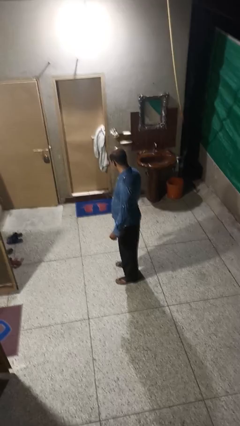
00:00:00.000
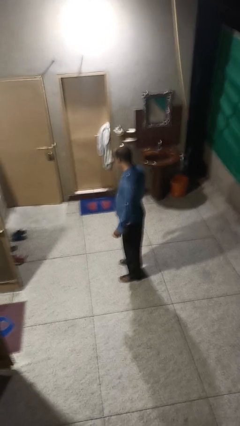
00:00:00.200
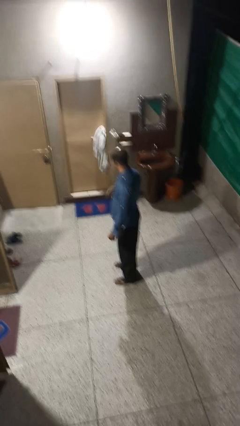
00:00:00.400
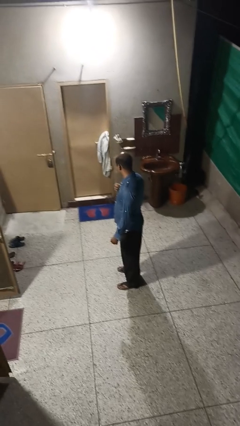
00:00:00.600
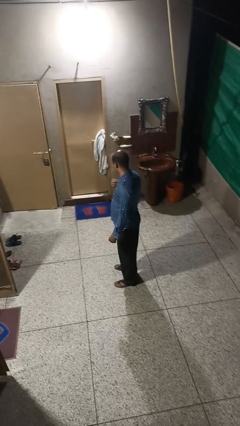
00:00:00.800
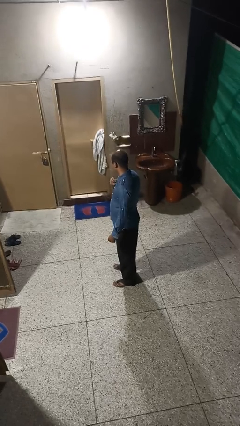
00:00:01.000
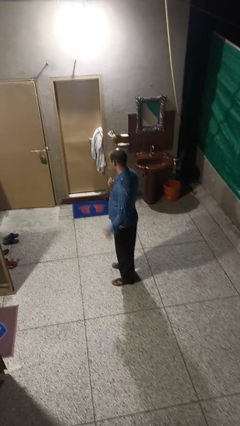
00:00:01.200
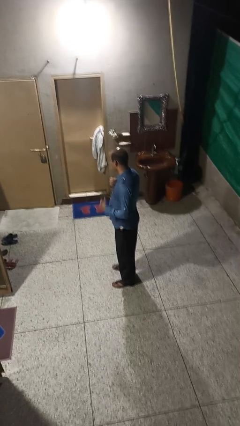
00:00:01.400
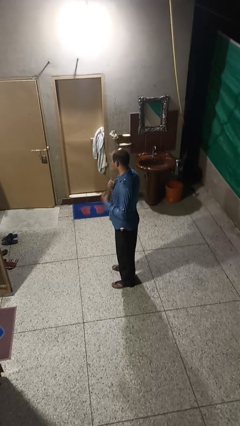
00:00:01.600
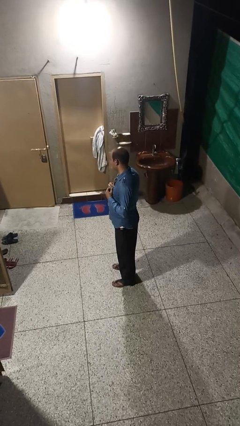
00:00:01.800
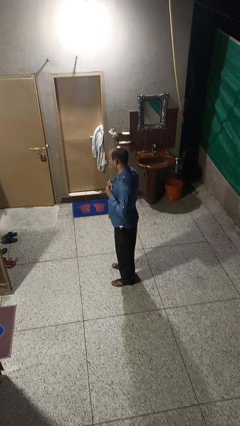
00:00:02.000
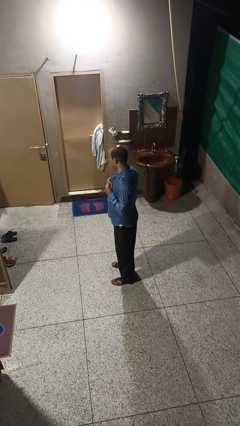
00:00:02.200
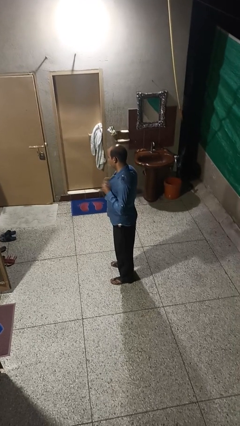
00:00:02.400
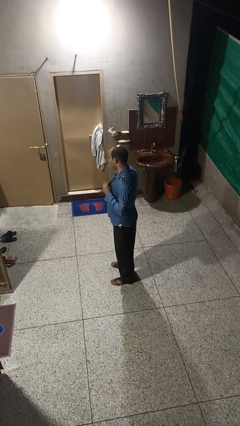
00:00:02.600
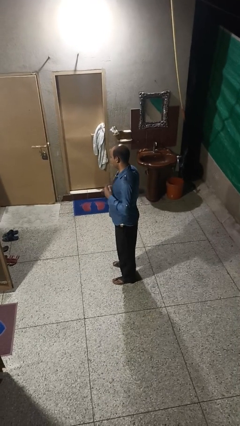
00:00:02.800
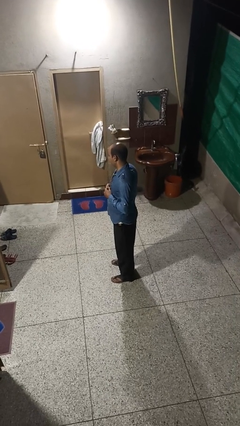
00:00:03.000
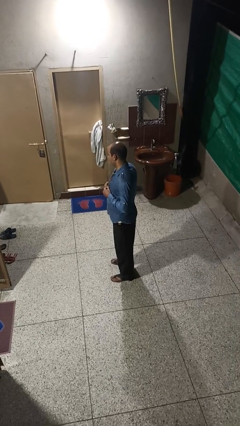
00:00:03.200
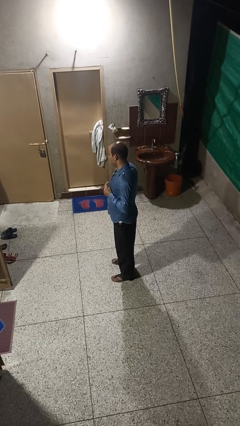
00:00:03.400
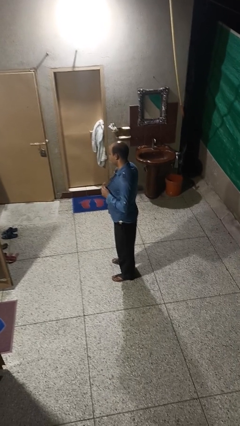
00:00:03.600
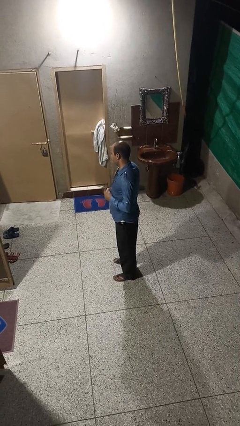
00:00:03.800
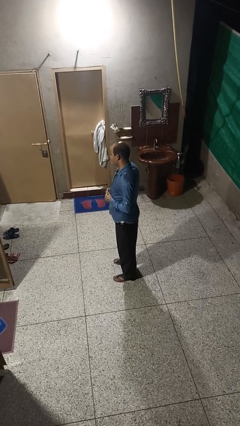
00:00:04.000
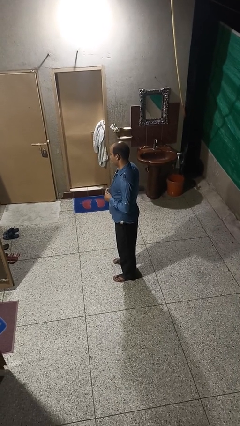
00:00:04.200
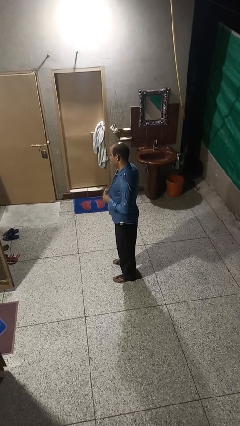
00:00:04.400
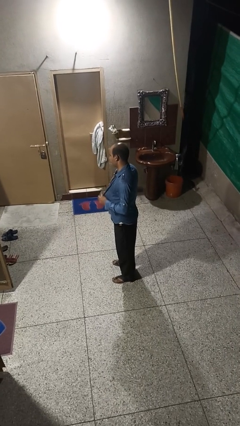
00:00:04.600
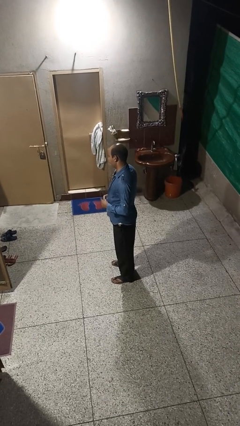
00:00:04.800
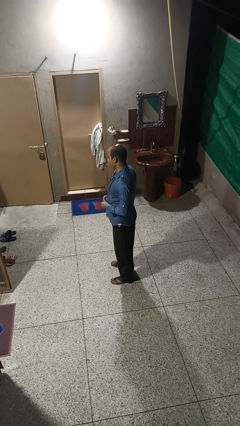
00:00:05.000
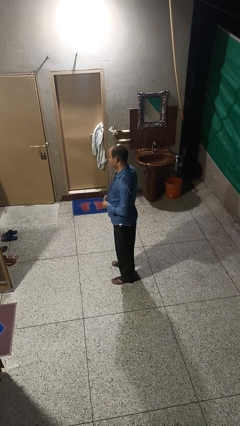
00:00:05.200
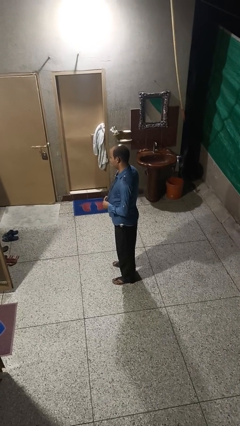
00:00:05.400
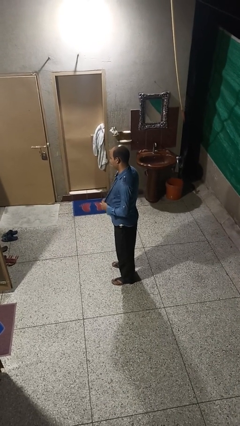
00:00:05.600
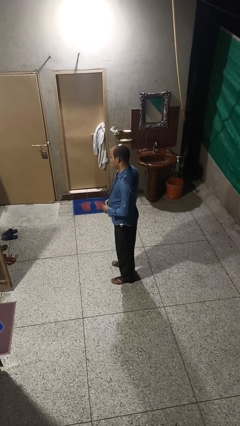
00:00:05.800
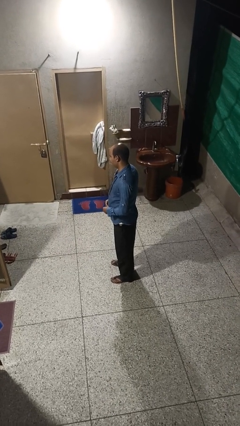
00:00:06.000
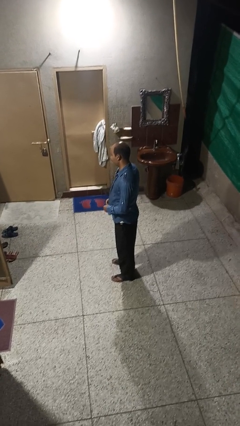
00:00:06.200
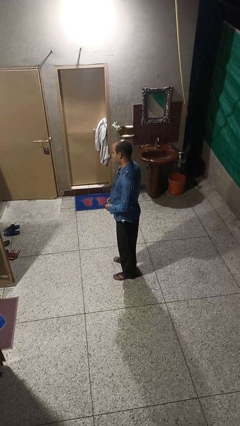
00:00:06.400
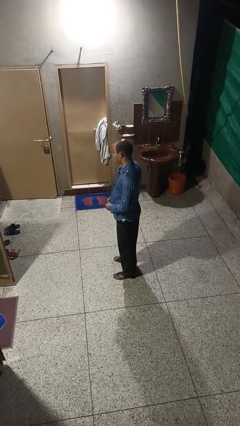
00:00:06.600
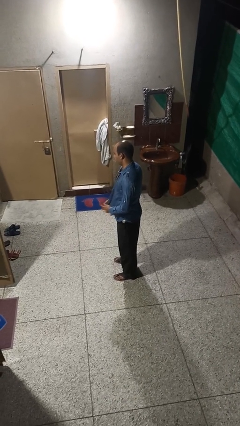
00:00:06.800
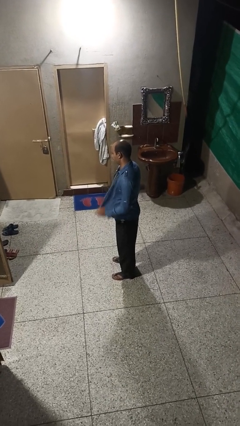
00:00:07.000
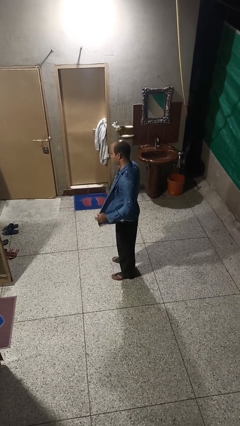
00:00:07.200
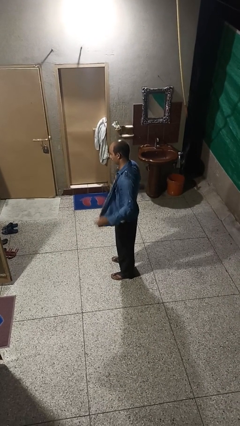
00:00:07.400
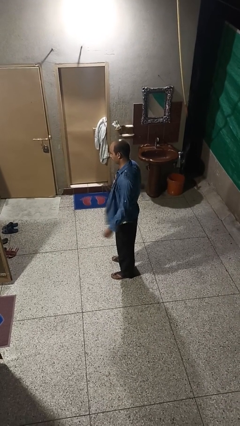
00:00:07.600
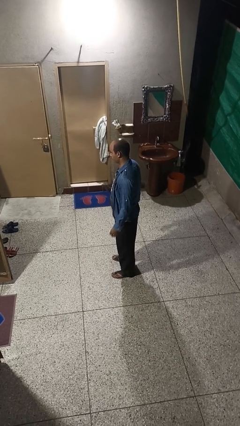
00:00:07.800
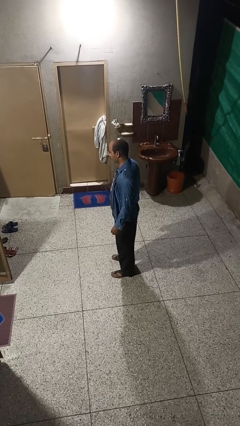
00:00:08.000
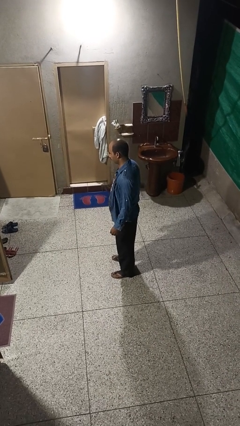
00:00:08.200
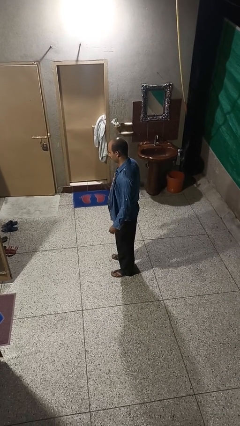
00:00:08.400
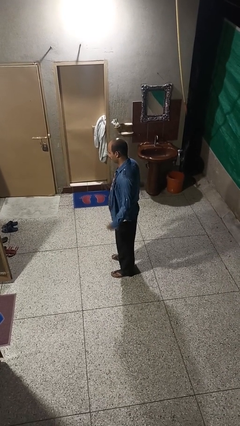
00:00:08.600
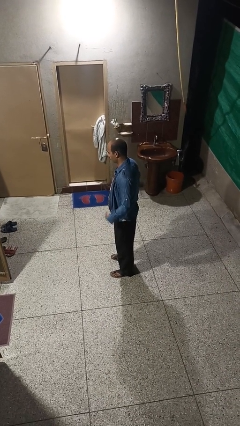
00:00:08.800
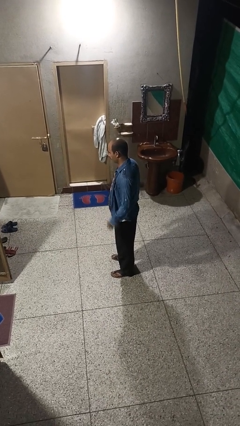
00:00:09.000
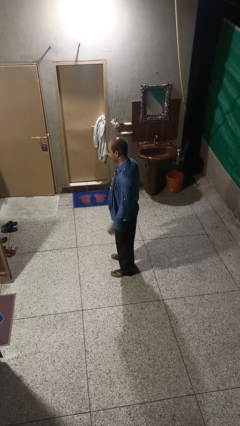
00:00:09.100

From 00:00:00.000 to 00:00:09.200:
person unbuttons shirt

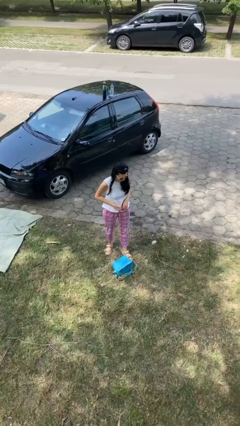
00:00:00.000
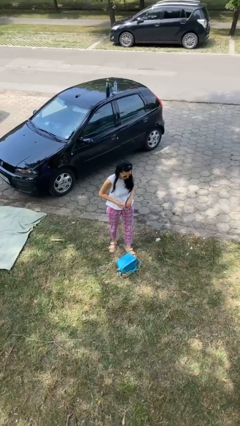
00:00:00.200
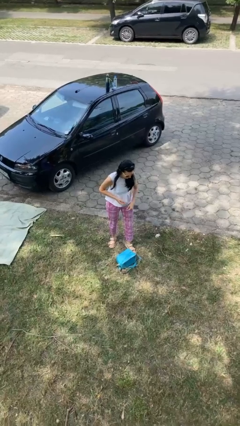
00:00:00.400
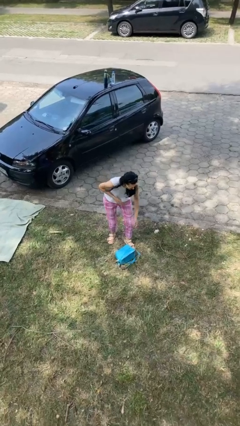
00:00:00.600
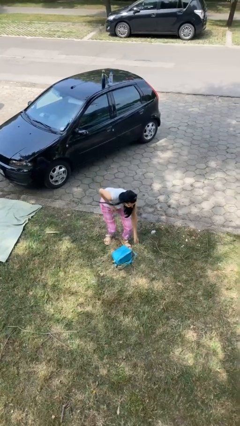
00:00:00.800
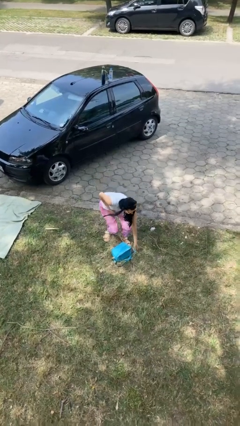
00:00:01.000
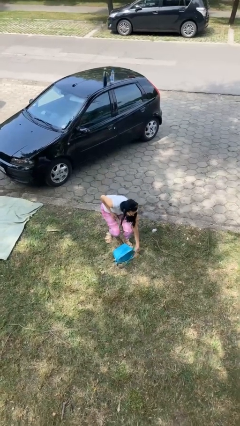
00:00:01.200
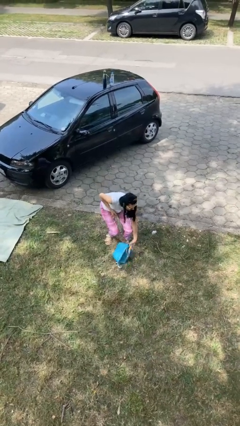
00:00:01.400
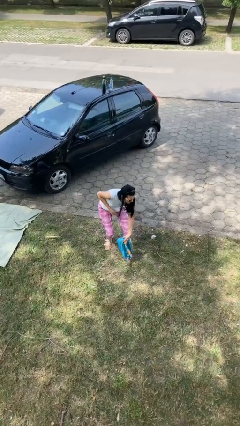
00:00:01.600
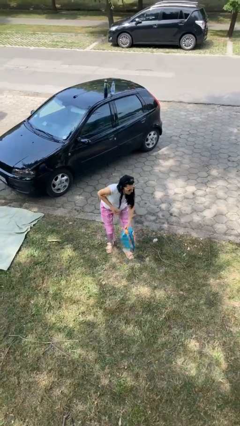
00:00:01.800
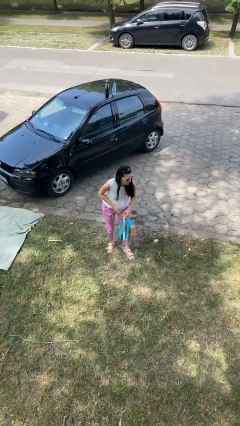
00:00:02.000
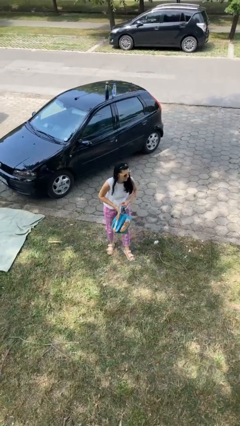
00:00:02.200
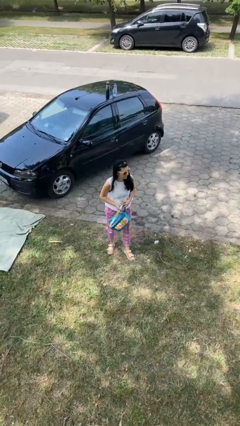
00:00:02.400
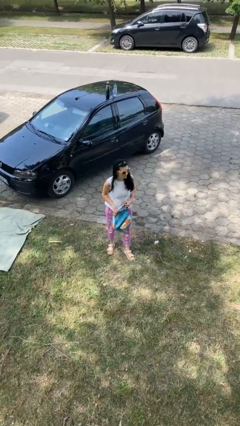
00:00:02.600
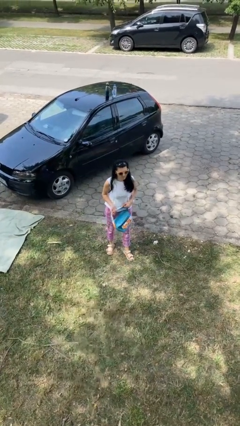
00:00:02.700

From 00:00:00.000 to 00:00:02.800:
person picks up object from floor

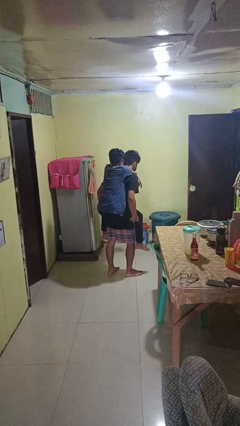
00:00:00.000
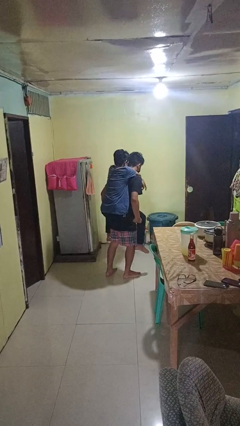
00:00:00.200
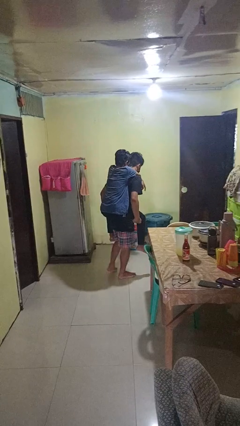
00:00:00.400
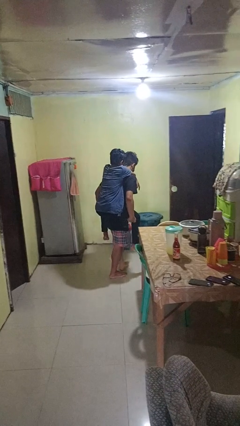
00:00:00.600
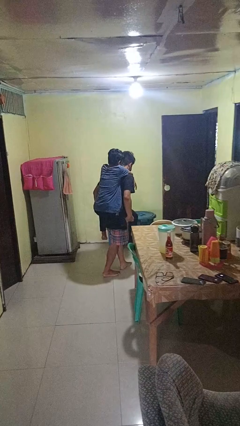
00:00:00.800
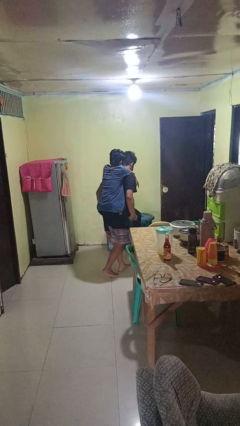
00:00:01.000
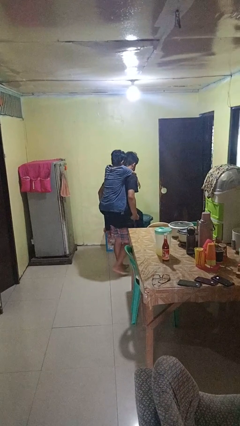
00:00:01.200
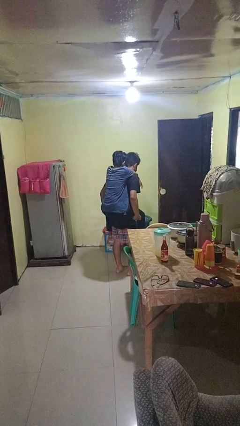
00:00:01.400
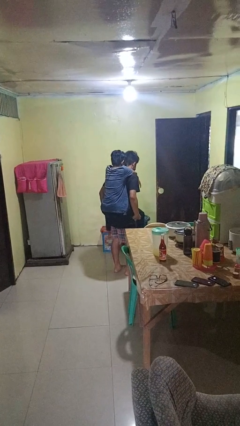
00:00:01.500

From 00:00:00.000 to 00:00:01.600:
person carries person on back

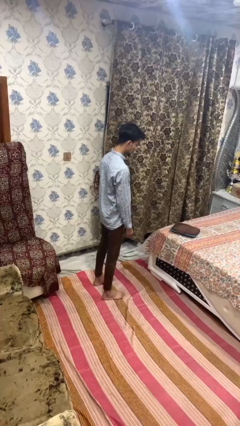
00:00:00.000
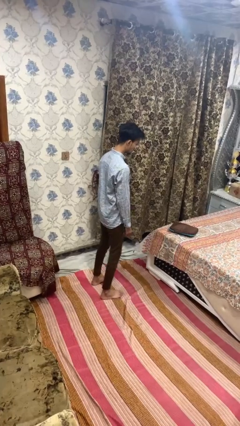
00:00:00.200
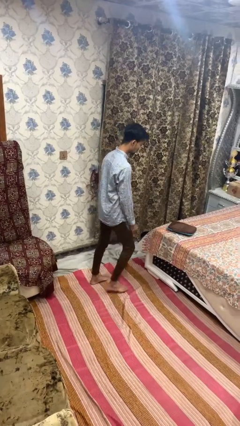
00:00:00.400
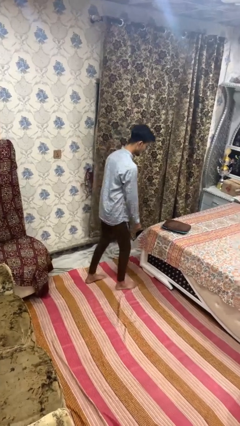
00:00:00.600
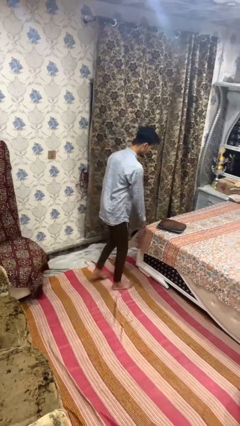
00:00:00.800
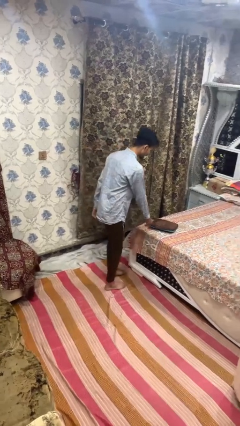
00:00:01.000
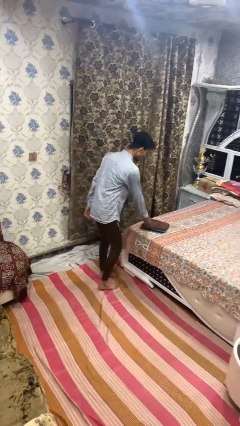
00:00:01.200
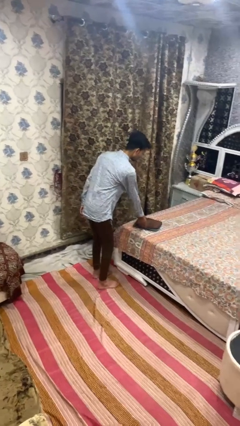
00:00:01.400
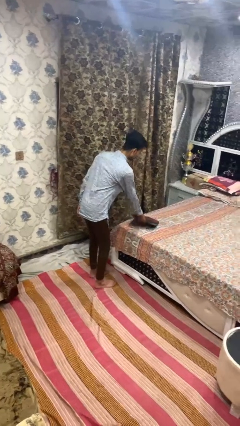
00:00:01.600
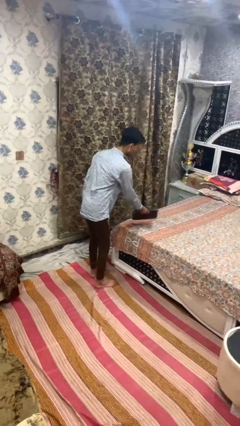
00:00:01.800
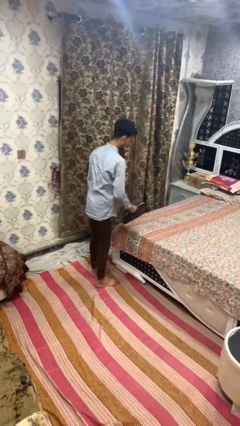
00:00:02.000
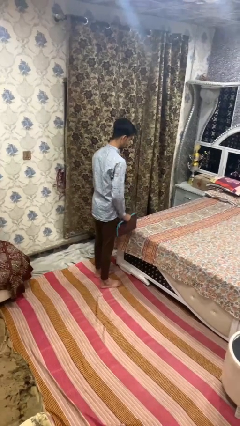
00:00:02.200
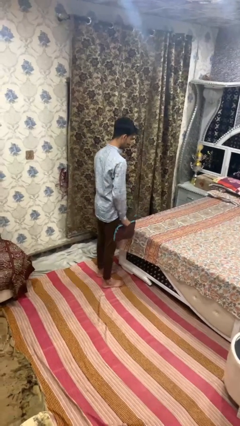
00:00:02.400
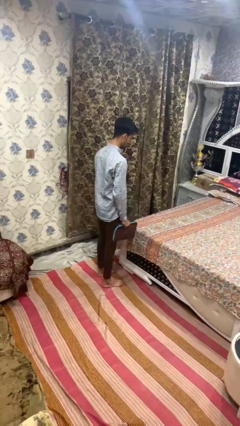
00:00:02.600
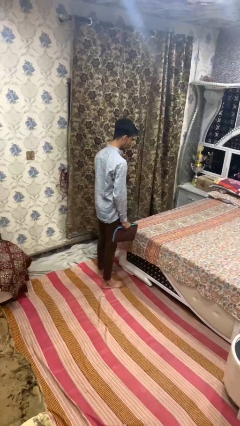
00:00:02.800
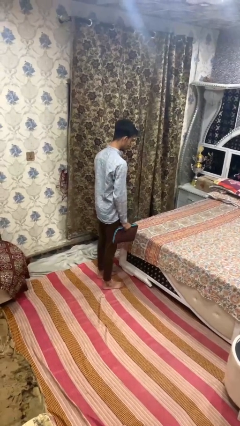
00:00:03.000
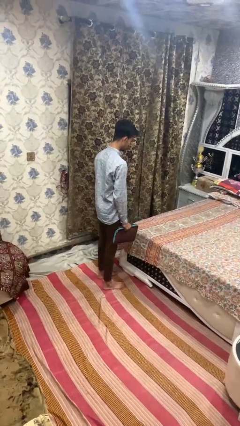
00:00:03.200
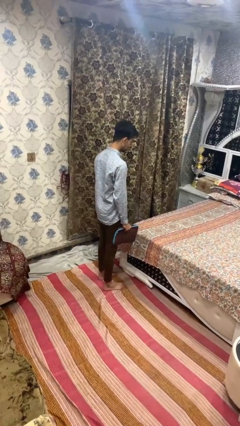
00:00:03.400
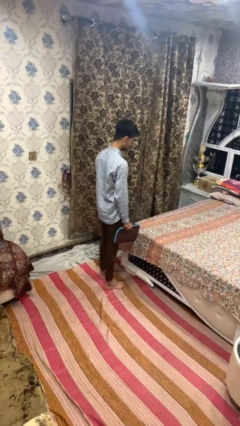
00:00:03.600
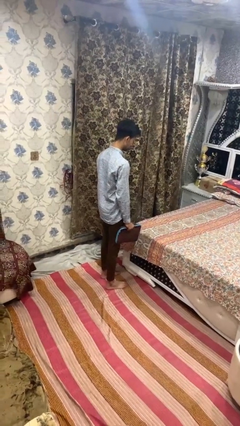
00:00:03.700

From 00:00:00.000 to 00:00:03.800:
person picks up object from bed

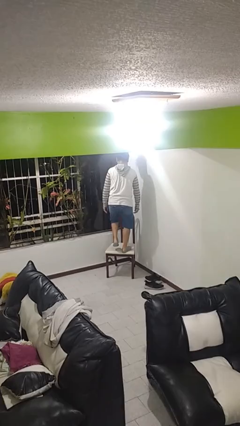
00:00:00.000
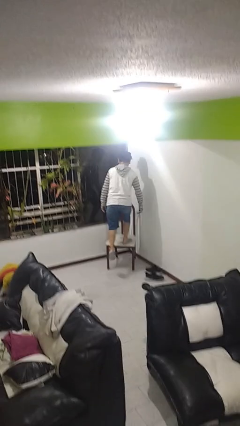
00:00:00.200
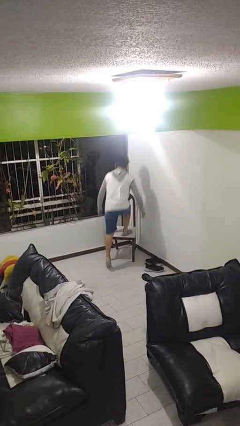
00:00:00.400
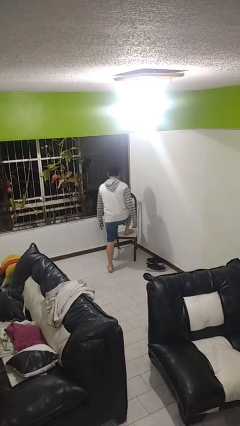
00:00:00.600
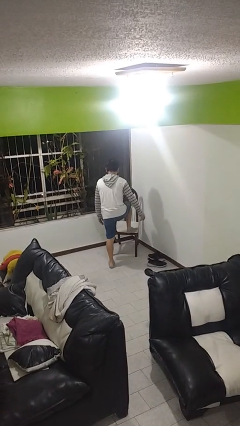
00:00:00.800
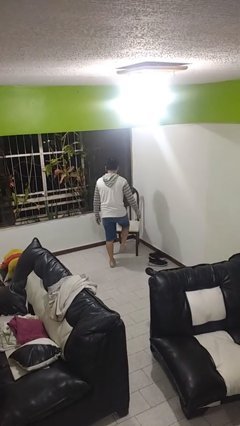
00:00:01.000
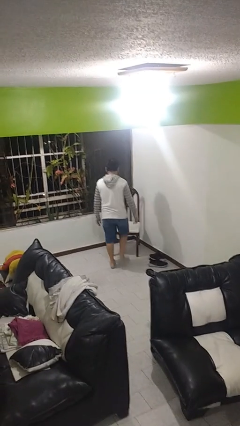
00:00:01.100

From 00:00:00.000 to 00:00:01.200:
person climbs off chair
